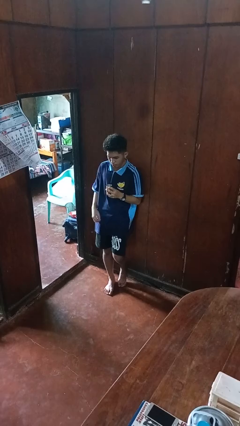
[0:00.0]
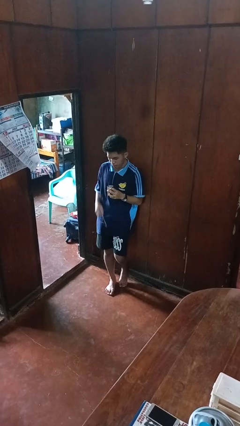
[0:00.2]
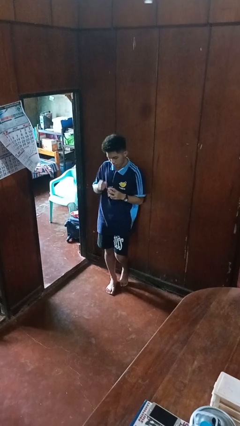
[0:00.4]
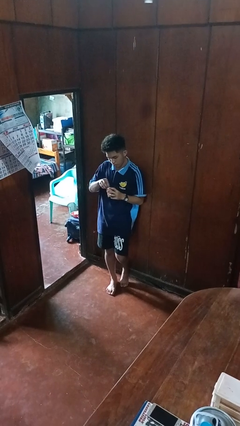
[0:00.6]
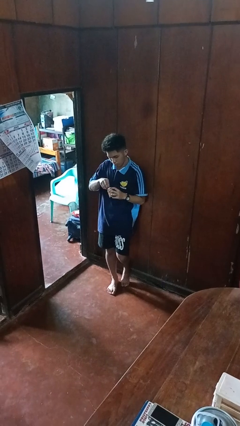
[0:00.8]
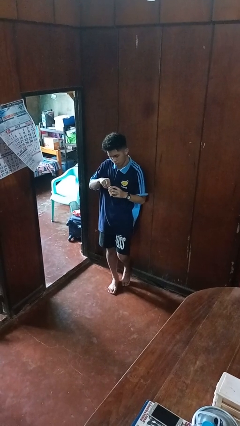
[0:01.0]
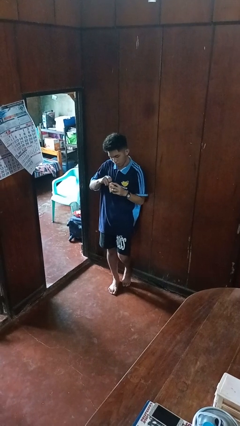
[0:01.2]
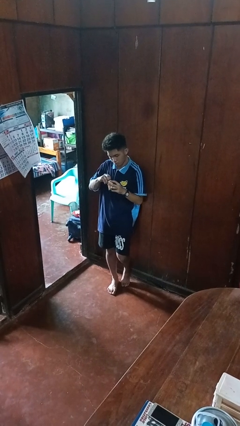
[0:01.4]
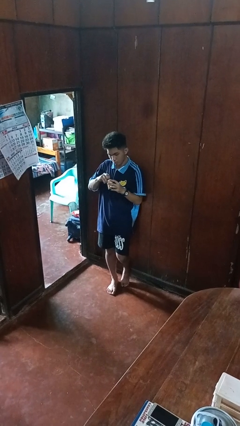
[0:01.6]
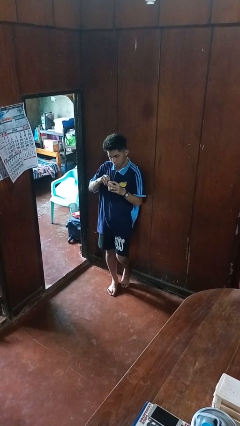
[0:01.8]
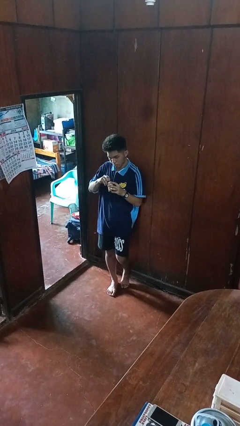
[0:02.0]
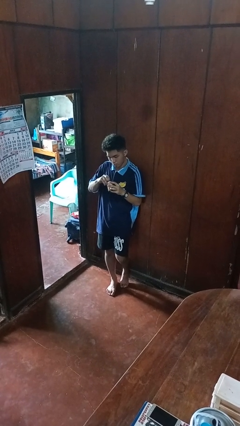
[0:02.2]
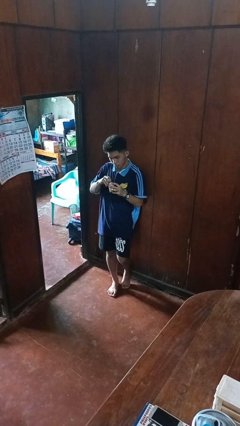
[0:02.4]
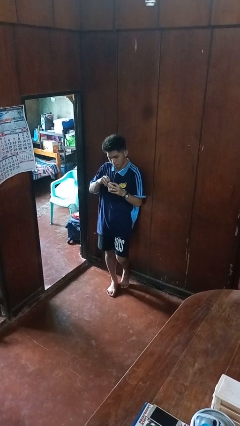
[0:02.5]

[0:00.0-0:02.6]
person opens beverage can

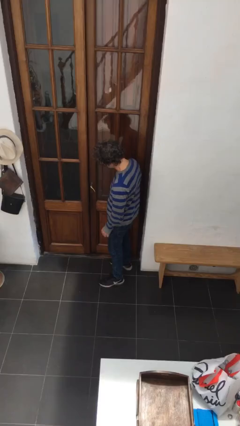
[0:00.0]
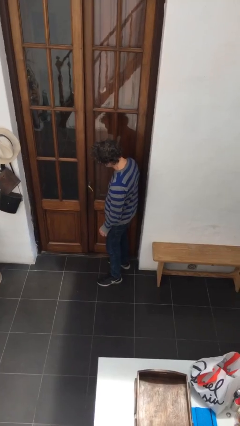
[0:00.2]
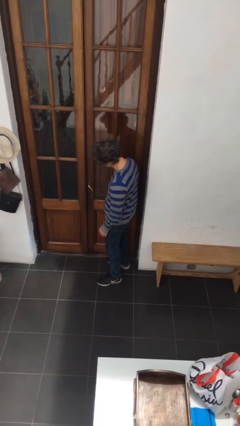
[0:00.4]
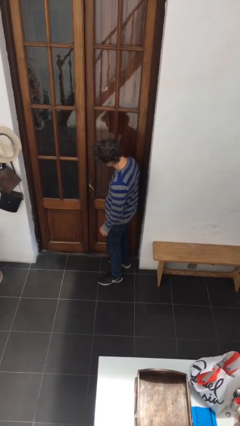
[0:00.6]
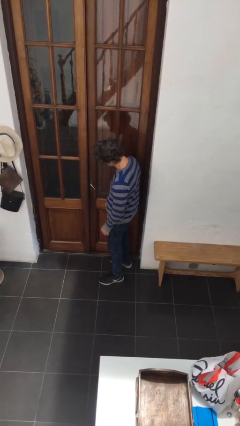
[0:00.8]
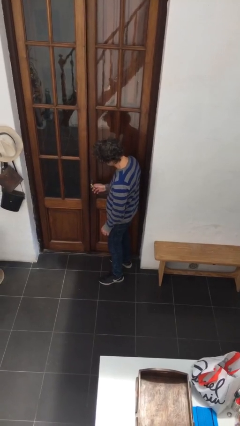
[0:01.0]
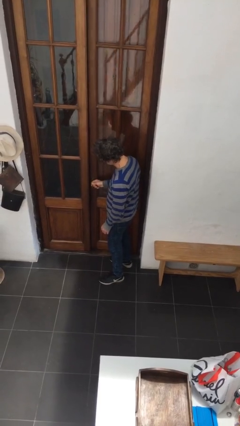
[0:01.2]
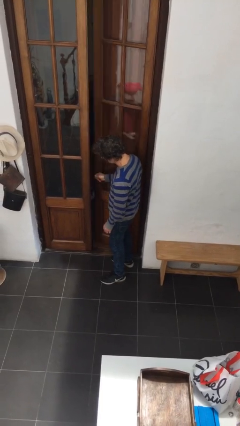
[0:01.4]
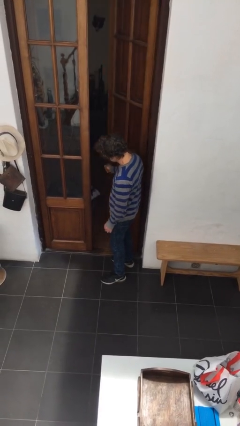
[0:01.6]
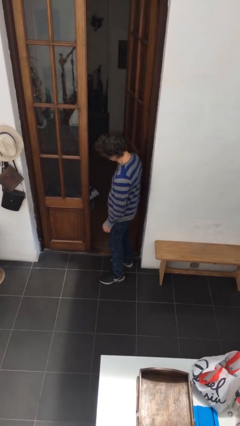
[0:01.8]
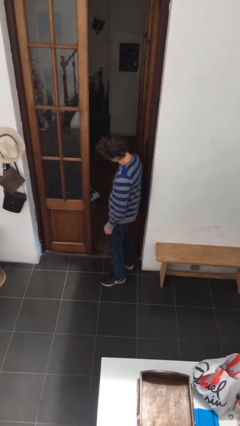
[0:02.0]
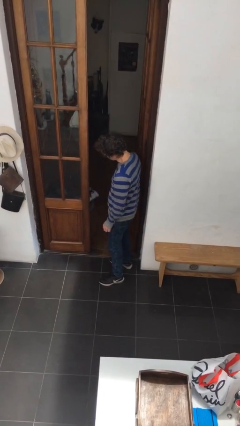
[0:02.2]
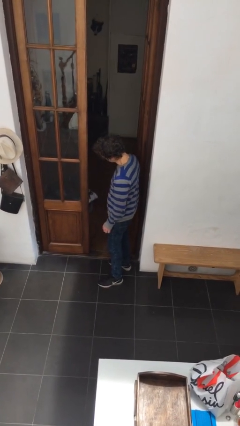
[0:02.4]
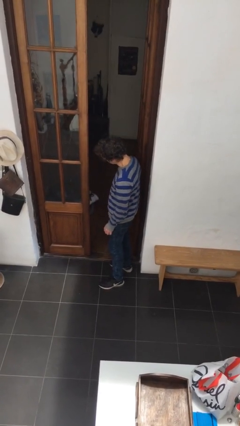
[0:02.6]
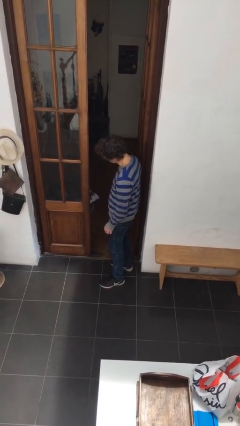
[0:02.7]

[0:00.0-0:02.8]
person opens facility door

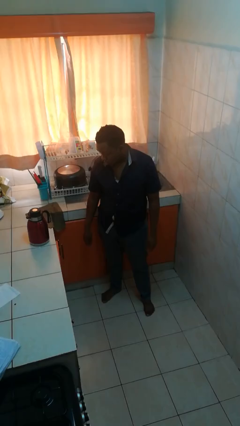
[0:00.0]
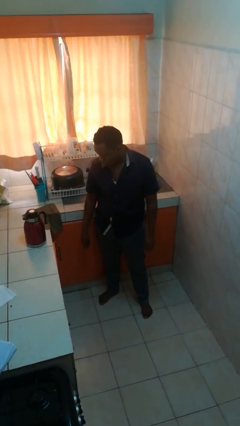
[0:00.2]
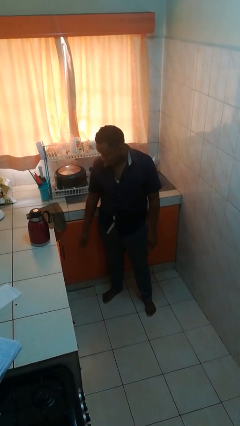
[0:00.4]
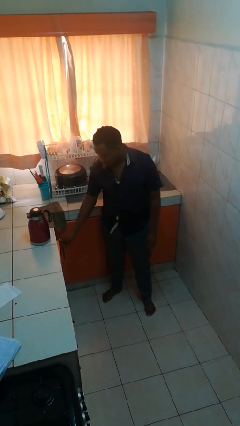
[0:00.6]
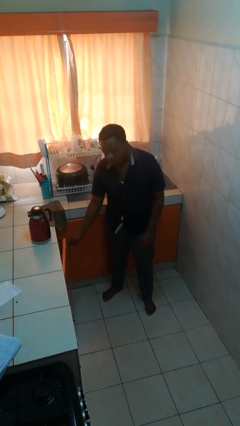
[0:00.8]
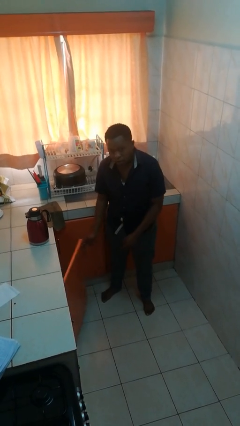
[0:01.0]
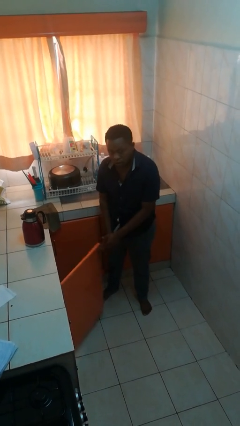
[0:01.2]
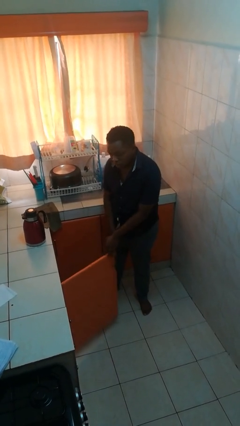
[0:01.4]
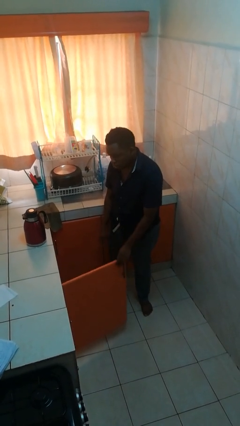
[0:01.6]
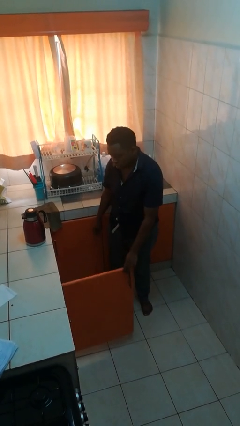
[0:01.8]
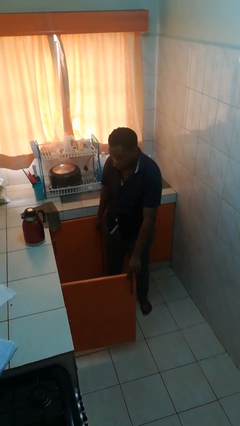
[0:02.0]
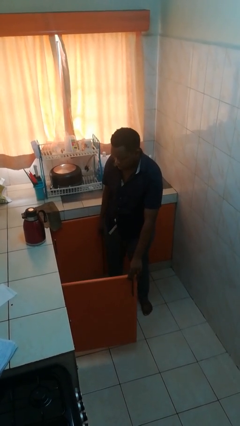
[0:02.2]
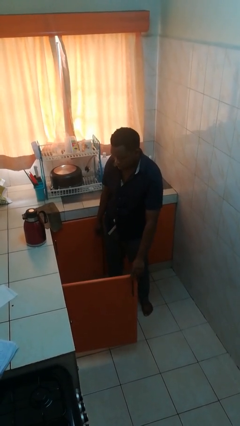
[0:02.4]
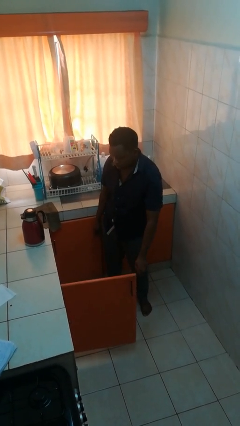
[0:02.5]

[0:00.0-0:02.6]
person opens cabinet

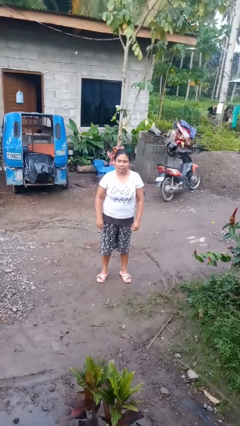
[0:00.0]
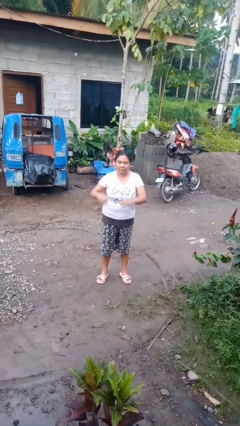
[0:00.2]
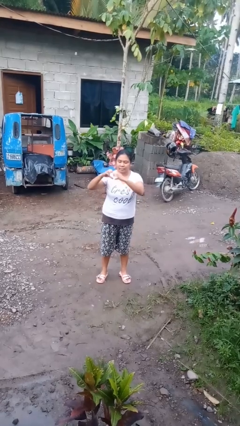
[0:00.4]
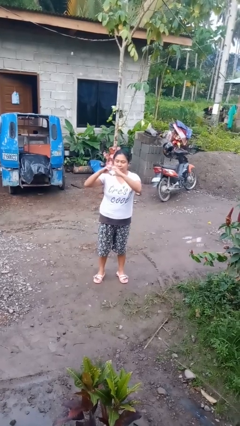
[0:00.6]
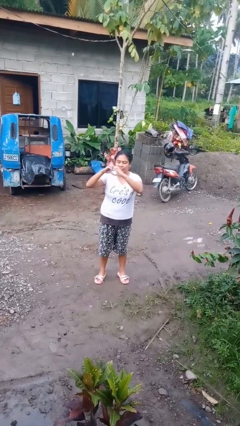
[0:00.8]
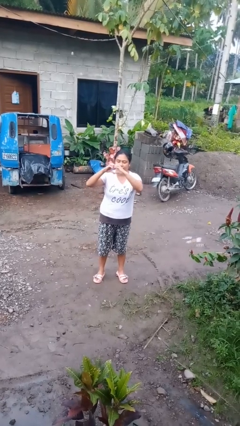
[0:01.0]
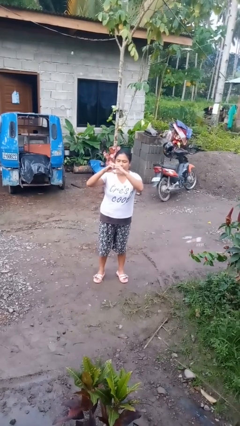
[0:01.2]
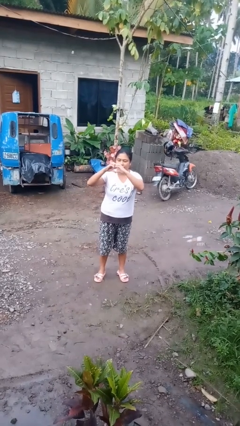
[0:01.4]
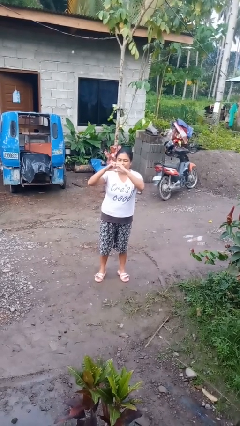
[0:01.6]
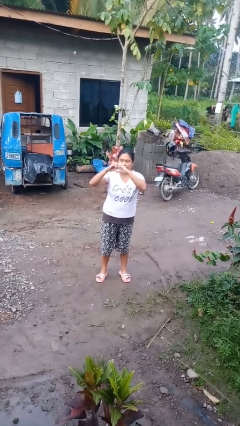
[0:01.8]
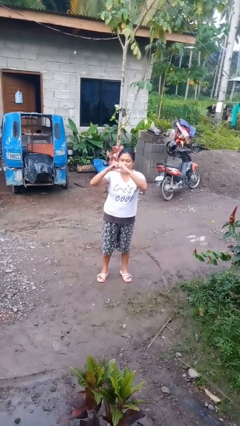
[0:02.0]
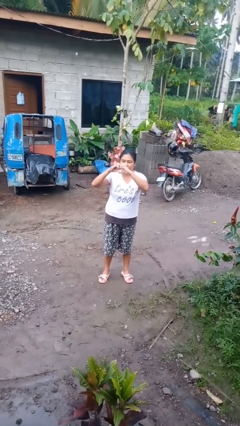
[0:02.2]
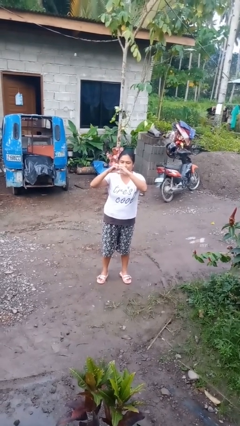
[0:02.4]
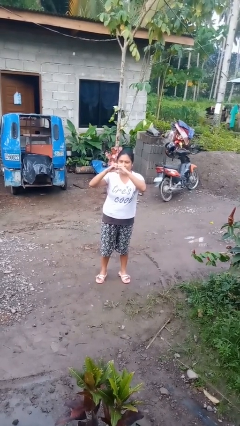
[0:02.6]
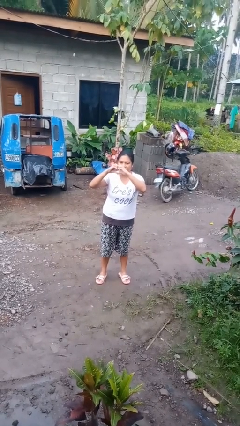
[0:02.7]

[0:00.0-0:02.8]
person gestures heart

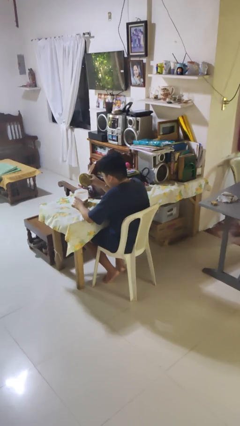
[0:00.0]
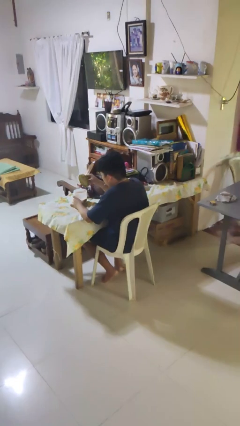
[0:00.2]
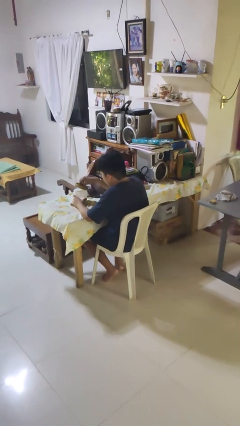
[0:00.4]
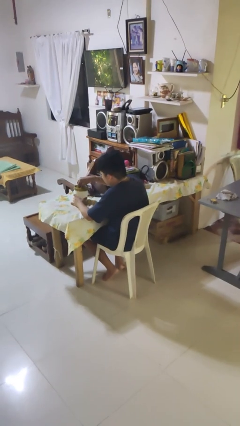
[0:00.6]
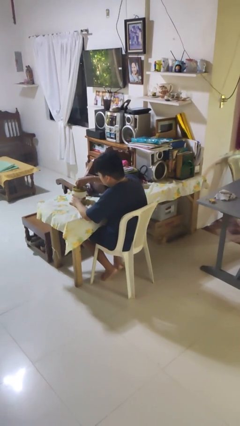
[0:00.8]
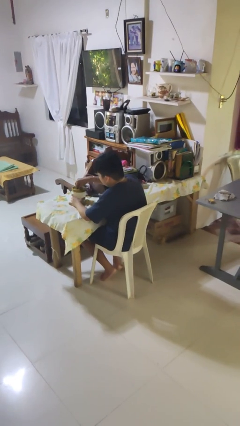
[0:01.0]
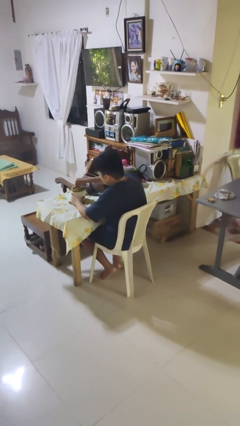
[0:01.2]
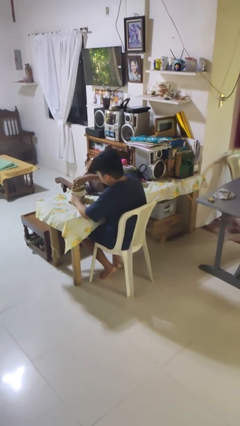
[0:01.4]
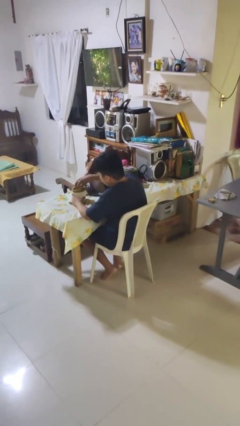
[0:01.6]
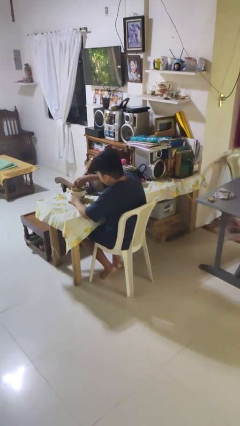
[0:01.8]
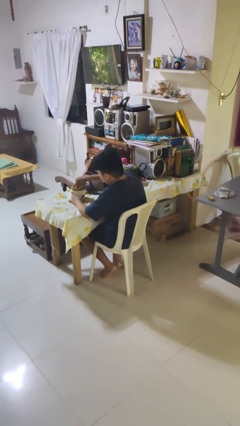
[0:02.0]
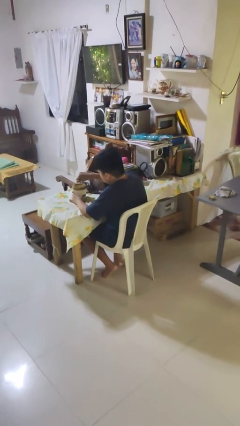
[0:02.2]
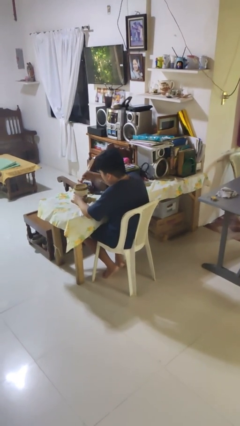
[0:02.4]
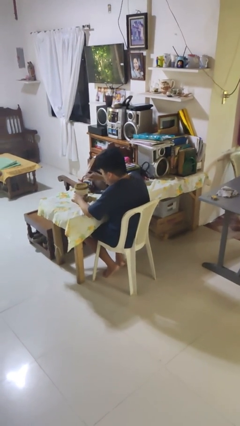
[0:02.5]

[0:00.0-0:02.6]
person closes jar

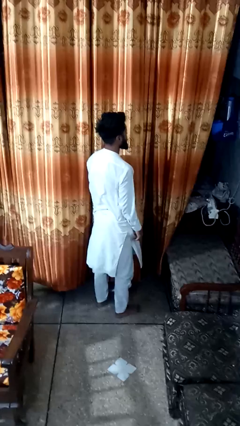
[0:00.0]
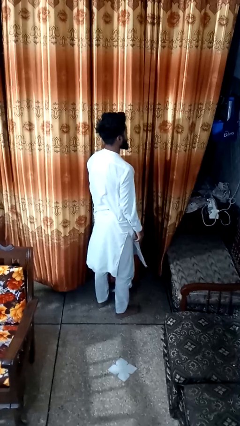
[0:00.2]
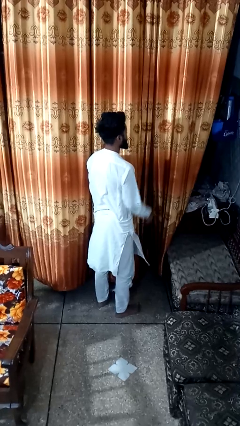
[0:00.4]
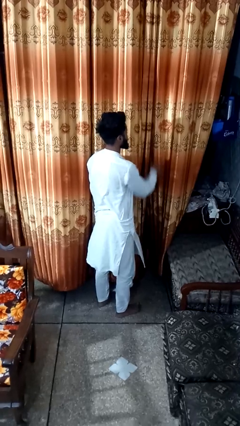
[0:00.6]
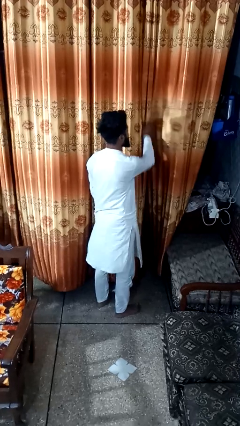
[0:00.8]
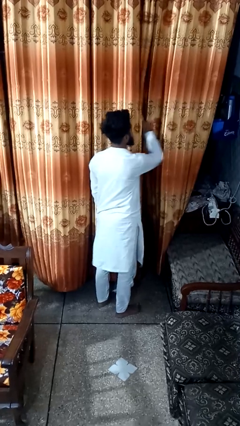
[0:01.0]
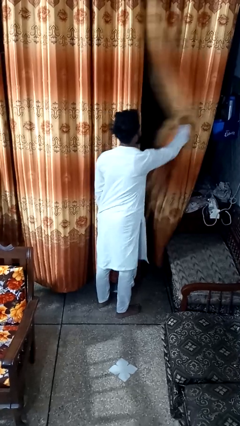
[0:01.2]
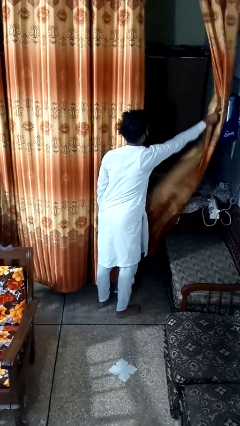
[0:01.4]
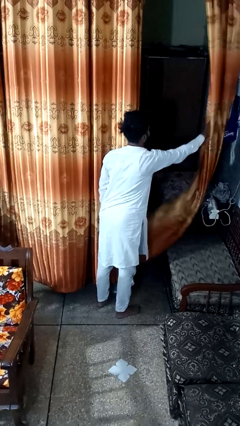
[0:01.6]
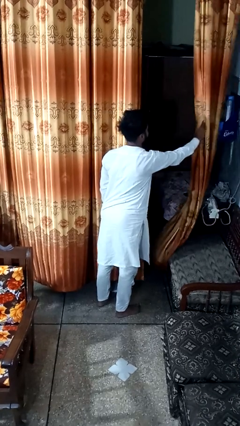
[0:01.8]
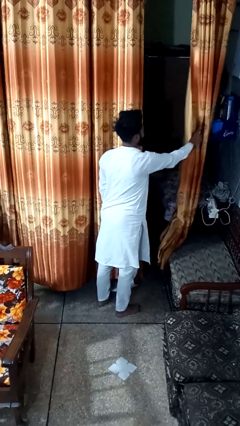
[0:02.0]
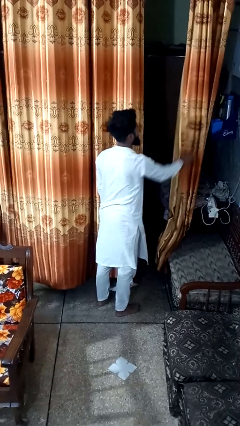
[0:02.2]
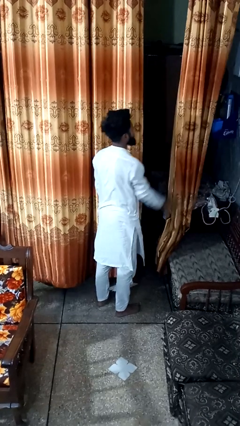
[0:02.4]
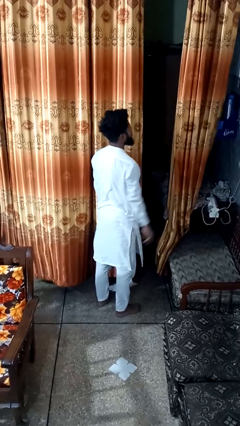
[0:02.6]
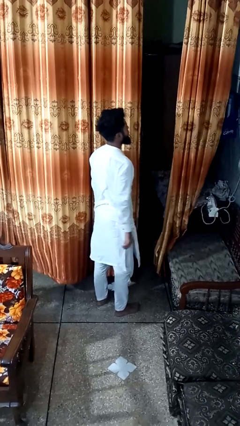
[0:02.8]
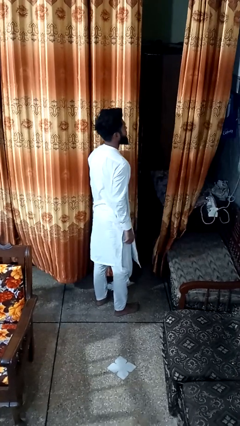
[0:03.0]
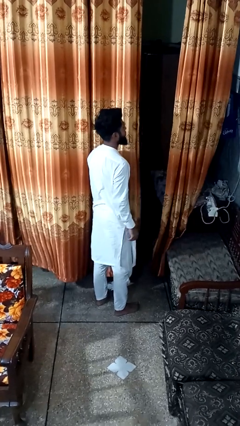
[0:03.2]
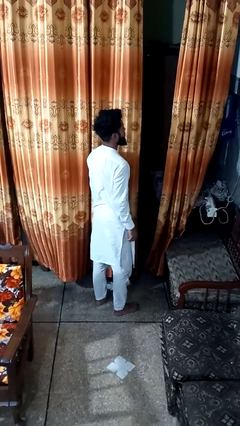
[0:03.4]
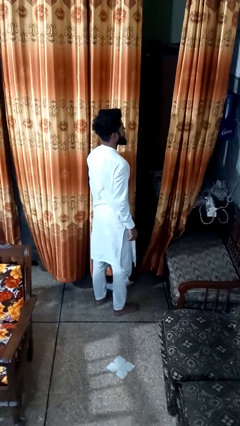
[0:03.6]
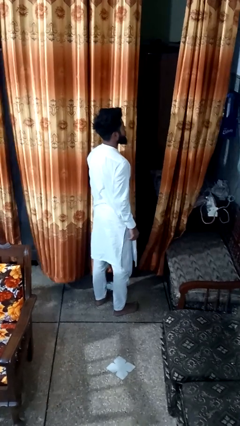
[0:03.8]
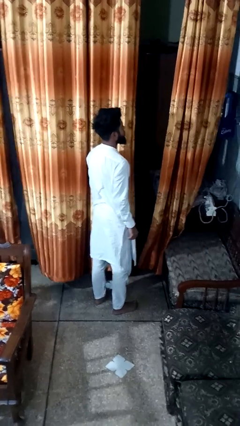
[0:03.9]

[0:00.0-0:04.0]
person opens curtains

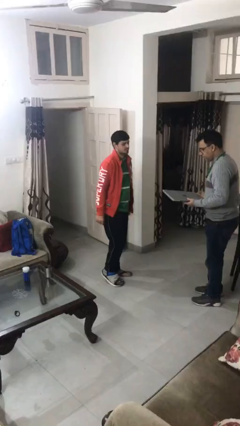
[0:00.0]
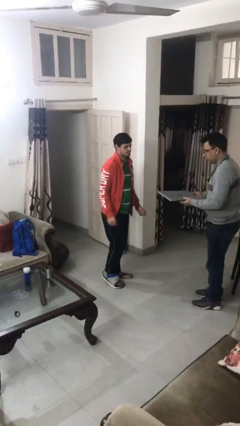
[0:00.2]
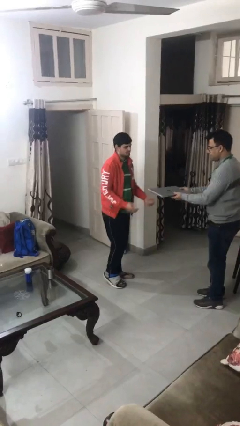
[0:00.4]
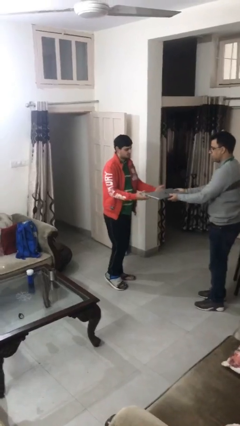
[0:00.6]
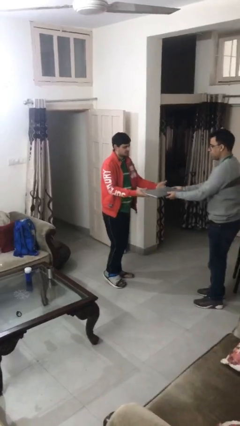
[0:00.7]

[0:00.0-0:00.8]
person transfers object to person
